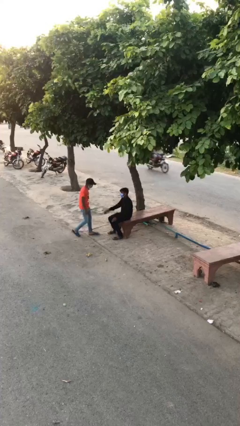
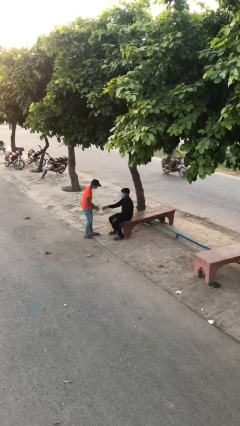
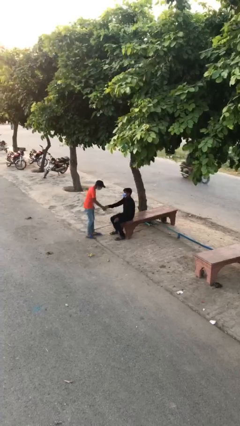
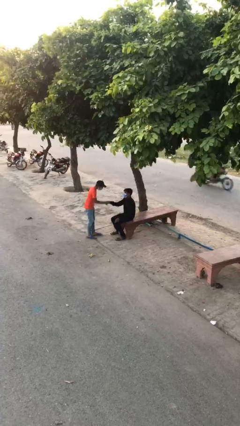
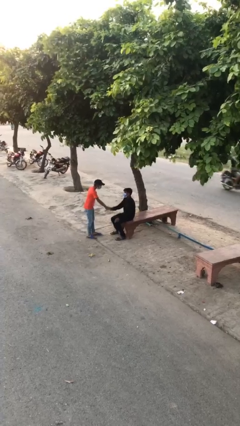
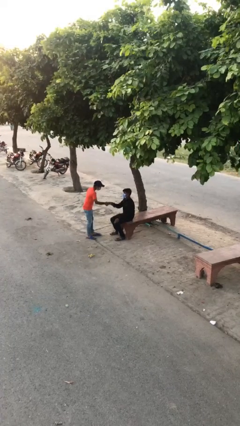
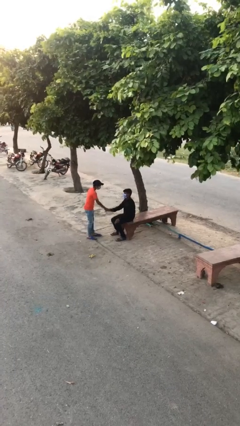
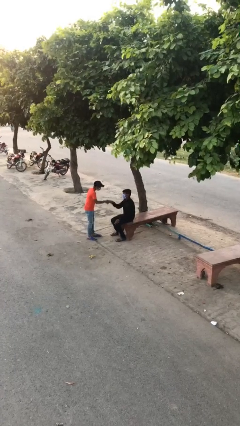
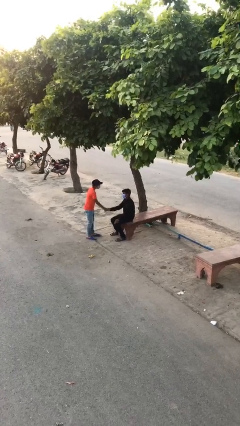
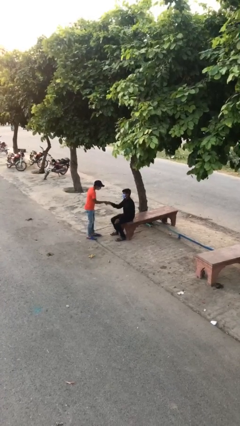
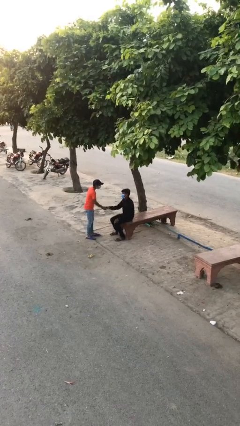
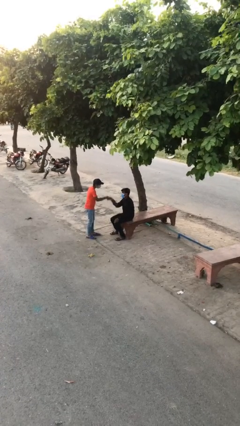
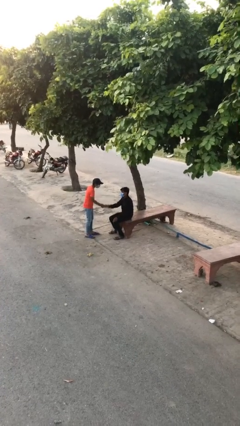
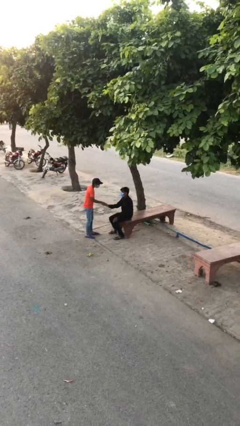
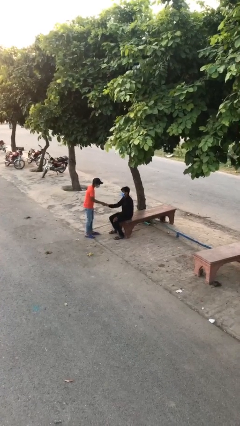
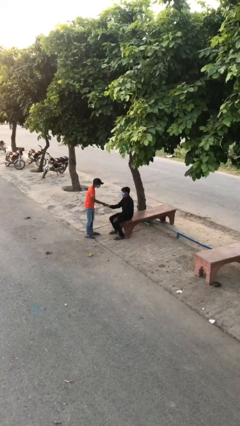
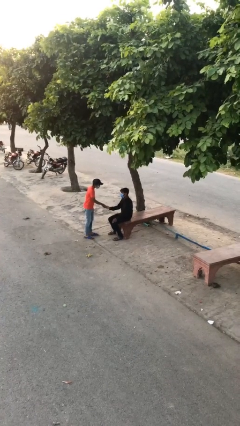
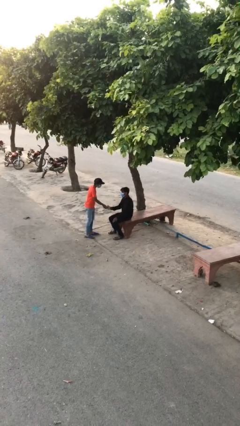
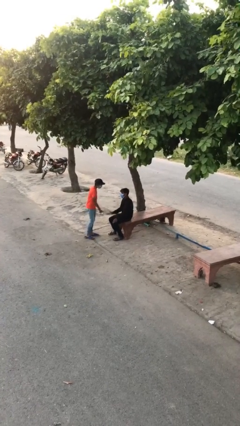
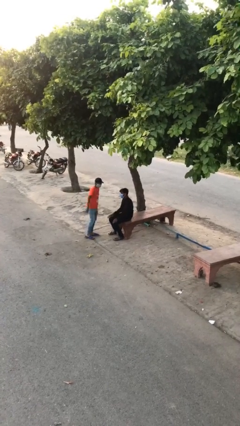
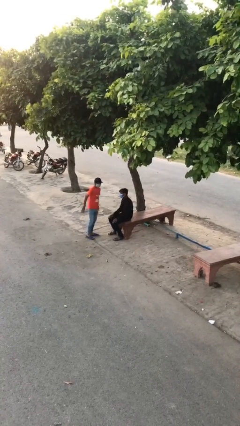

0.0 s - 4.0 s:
person shakes hand

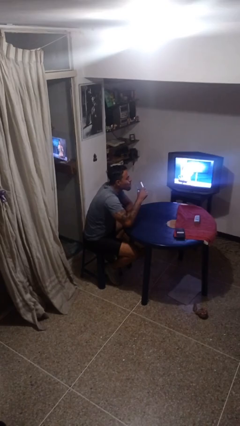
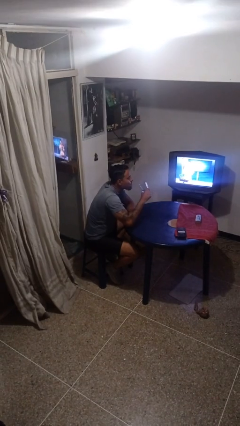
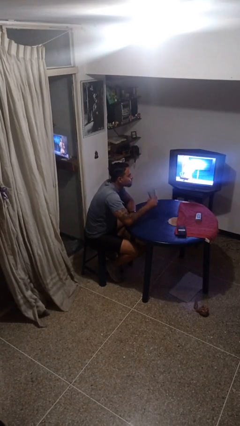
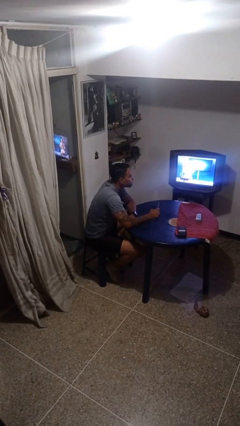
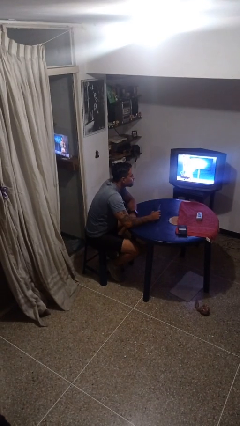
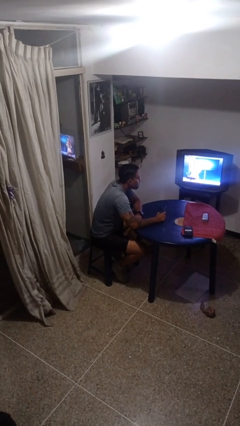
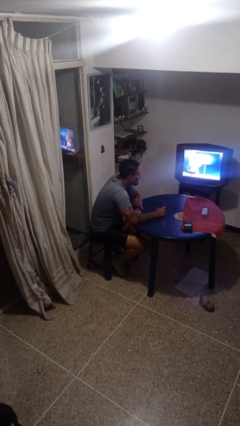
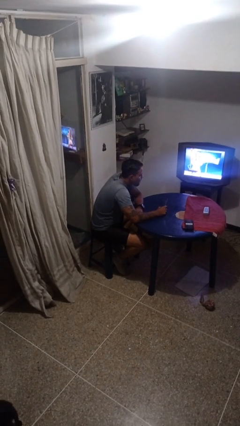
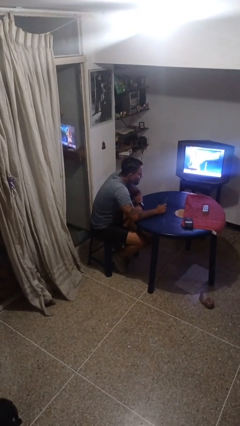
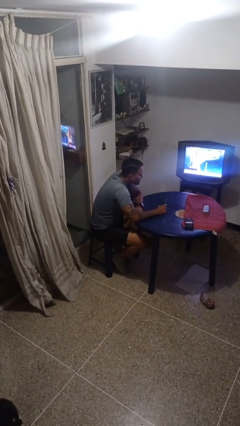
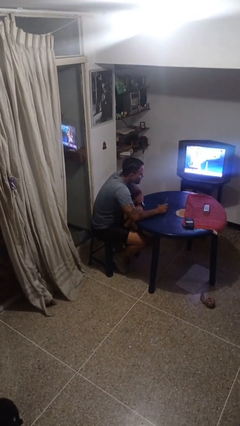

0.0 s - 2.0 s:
person puts down object on table

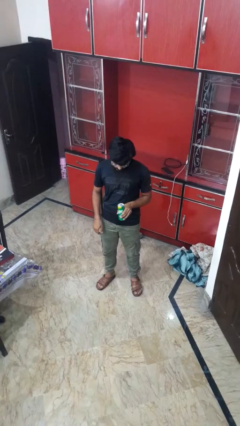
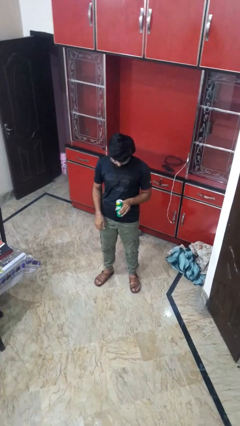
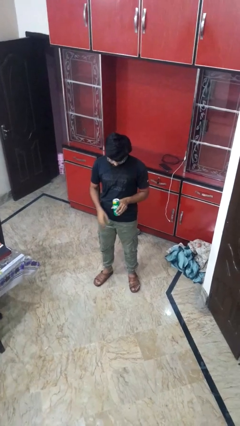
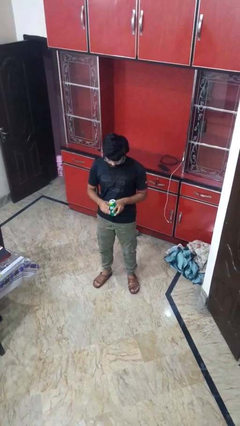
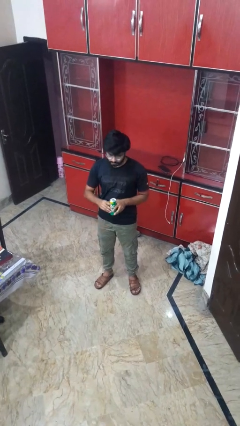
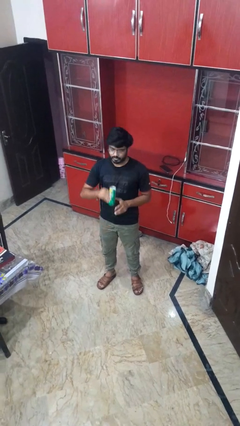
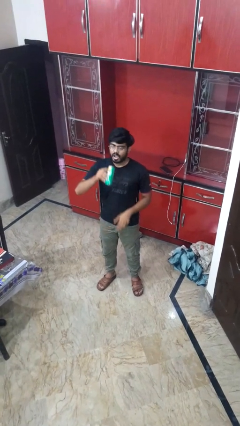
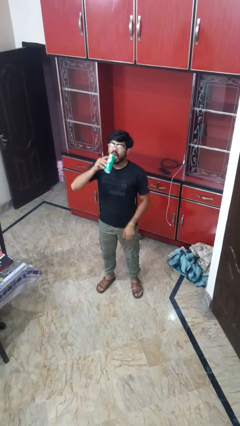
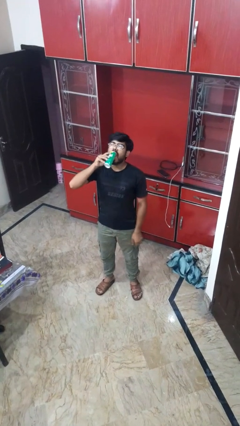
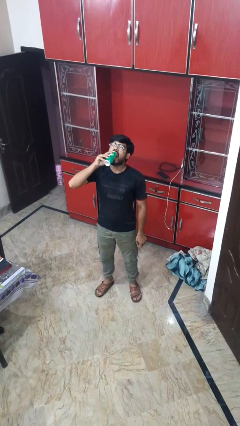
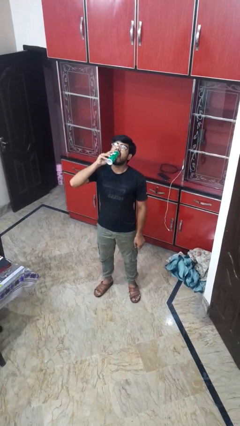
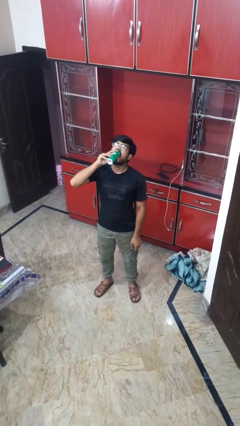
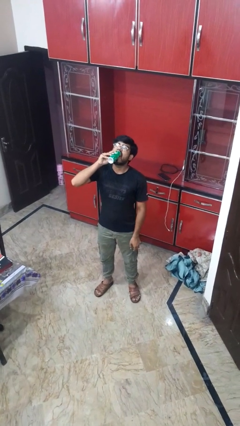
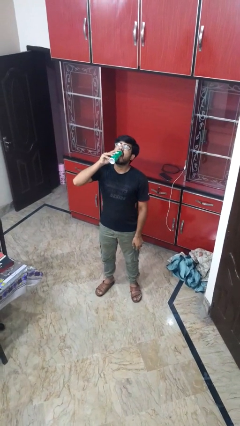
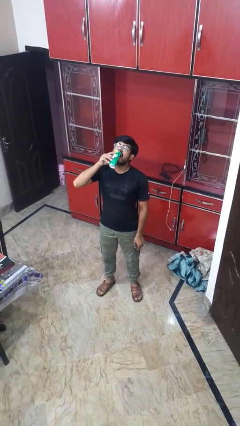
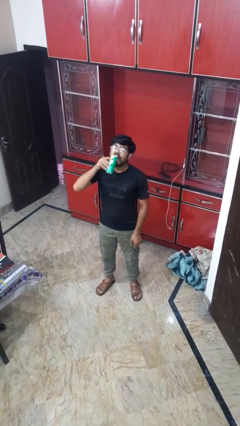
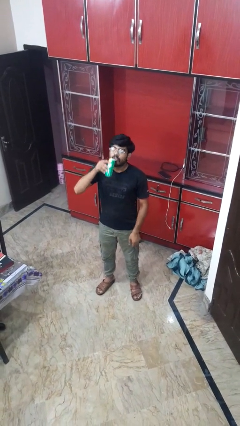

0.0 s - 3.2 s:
person drinks from beverage can

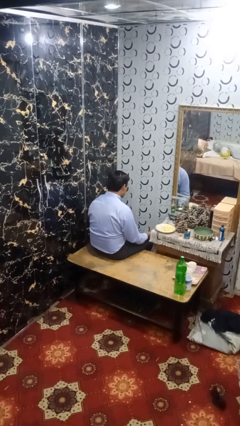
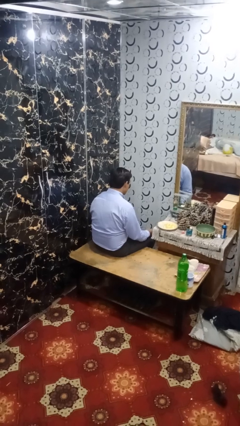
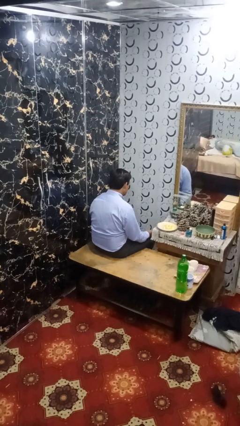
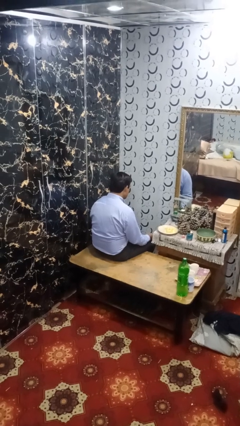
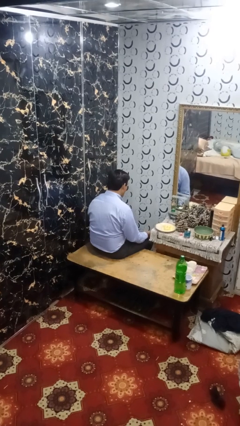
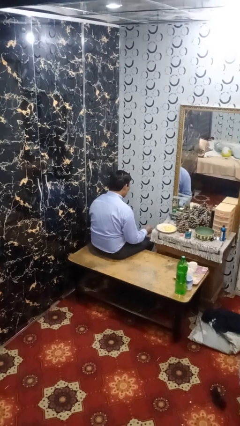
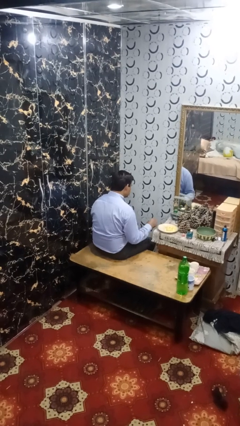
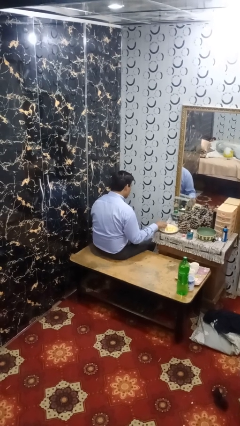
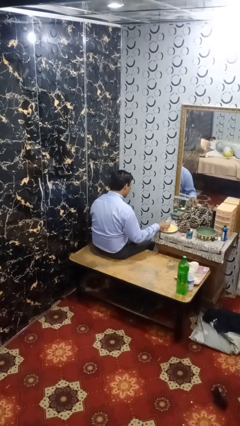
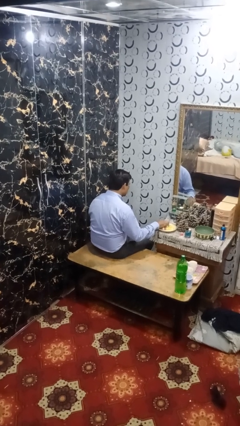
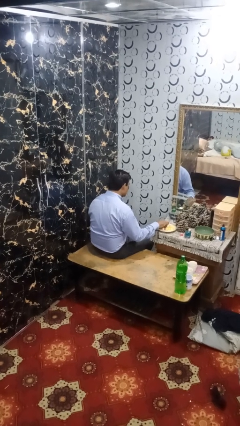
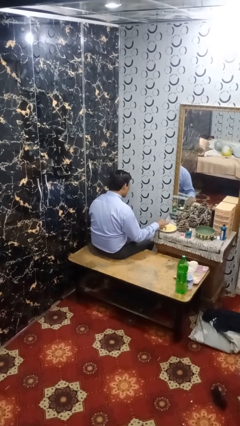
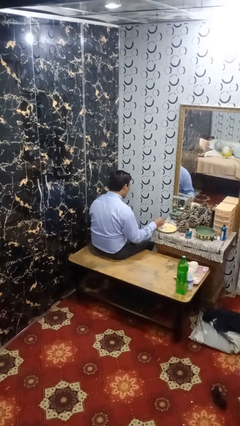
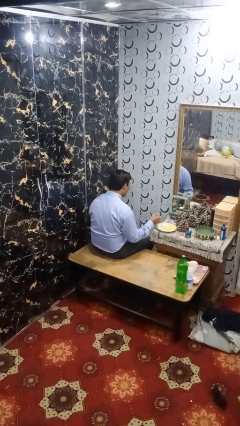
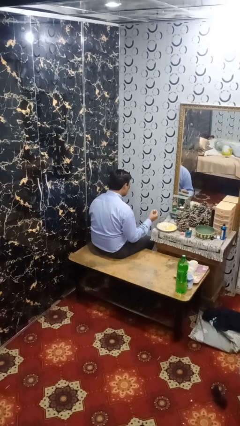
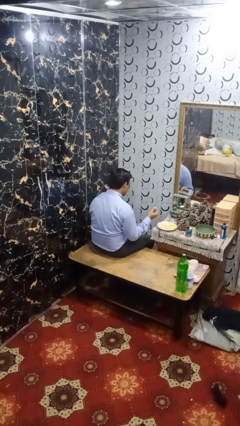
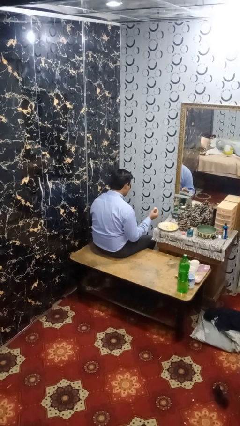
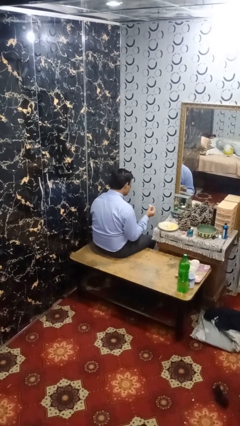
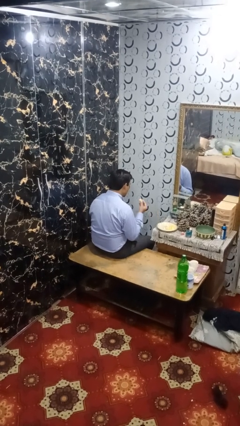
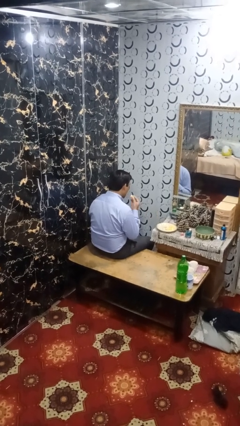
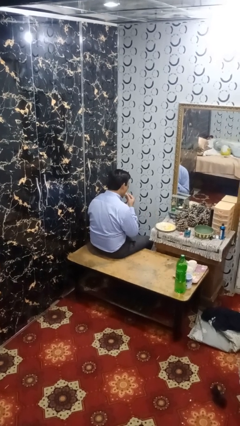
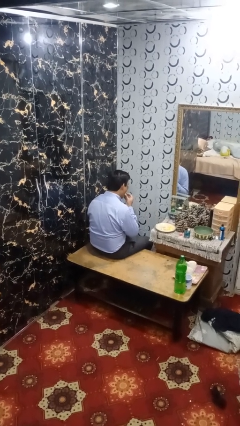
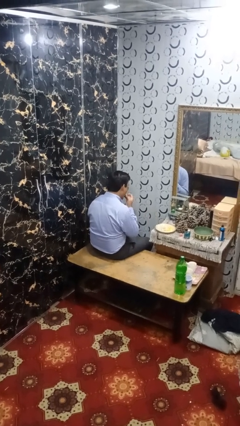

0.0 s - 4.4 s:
person eats with hands

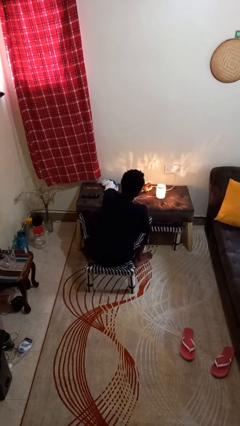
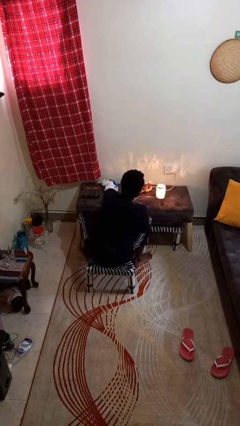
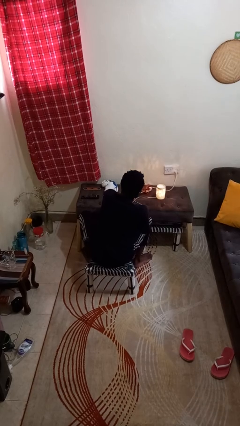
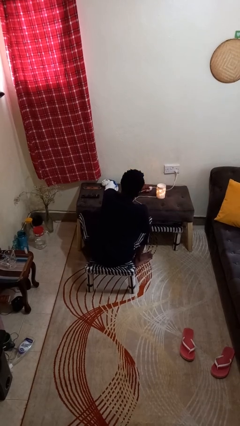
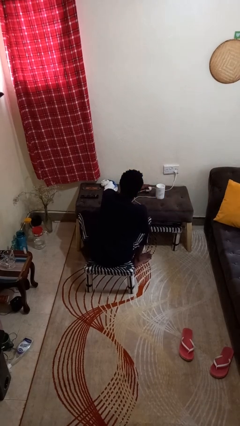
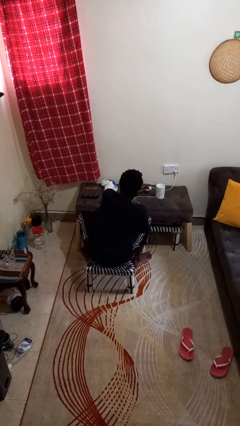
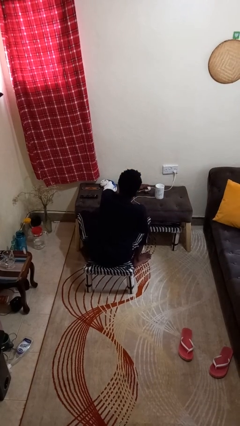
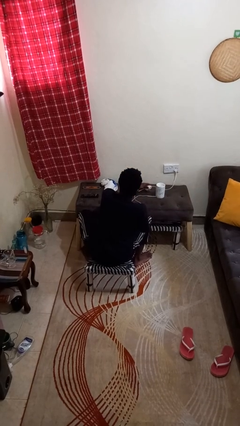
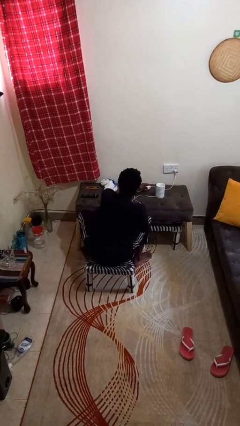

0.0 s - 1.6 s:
person turns off fan

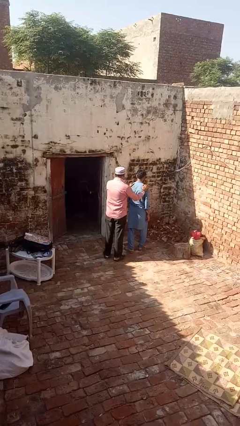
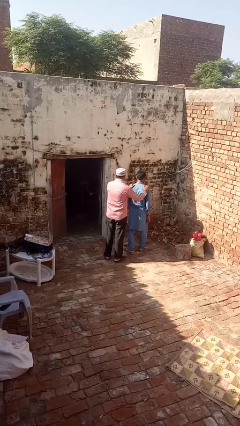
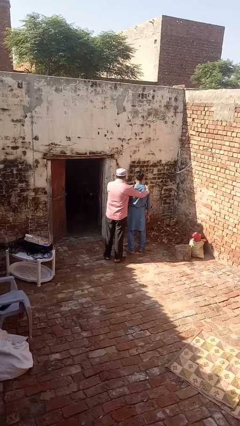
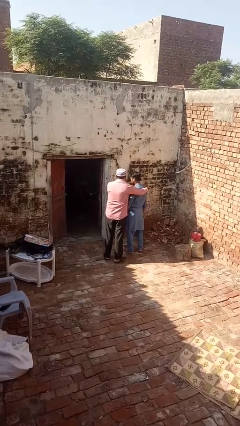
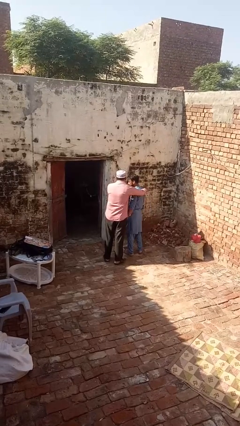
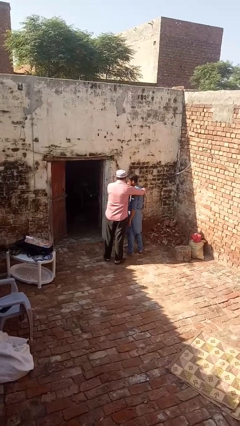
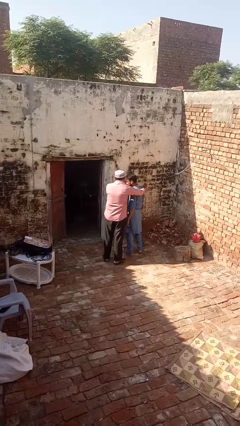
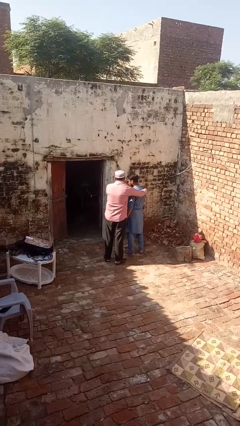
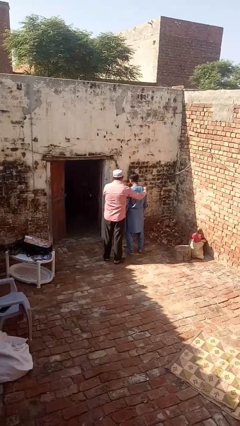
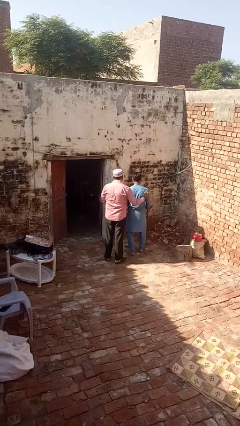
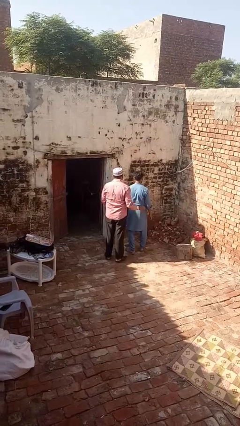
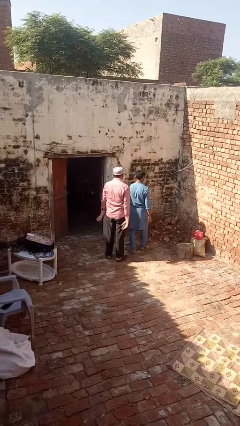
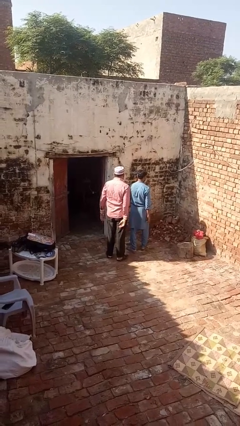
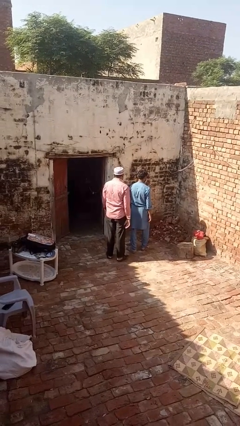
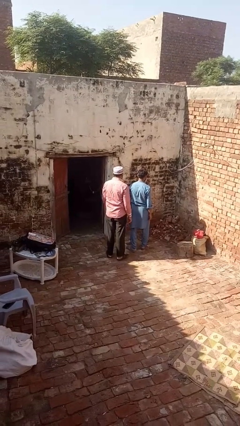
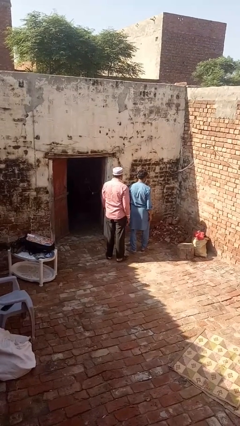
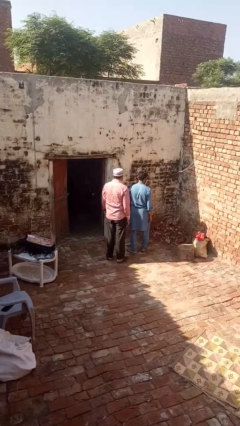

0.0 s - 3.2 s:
person spins person around
